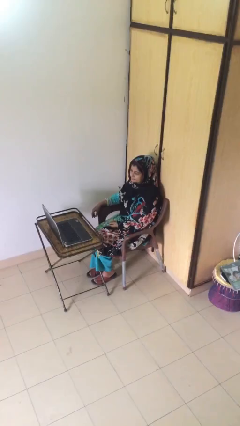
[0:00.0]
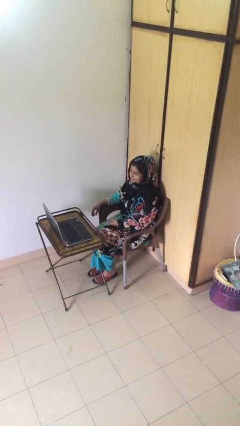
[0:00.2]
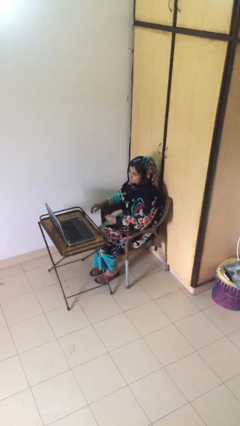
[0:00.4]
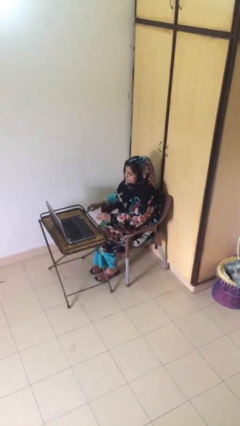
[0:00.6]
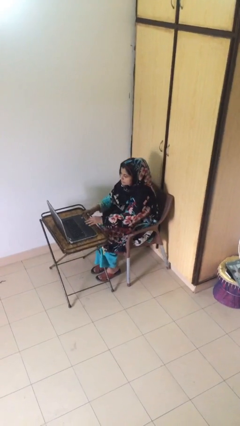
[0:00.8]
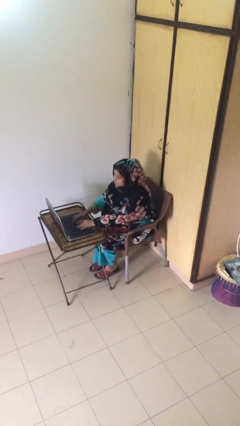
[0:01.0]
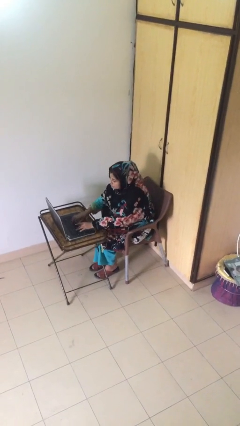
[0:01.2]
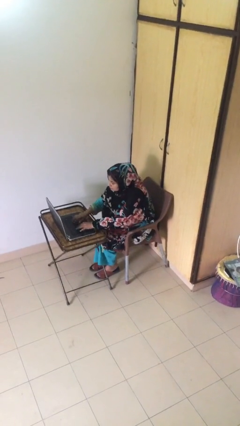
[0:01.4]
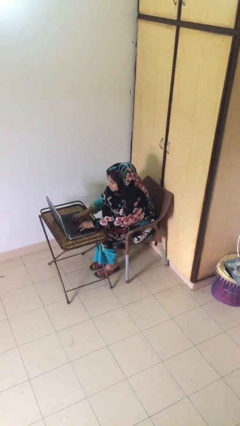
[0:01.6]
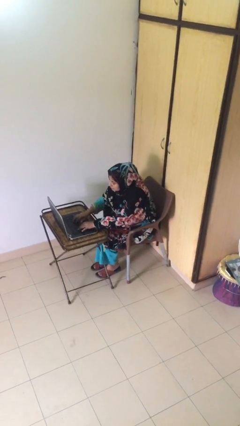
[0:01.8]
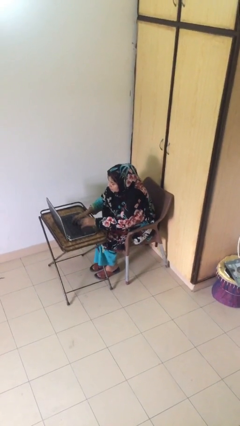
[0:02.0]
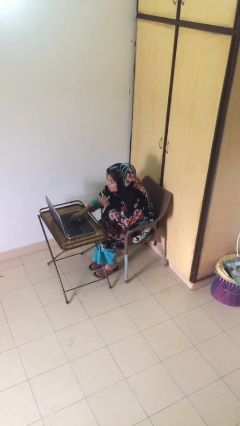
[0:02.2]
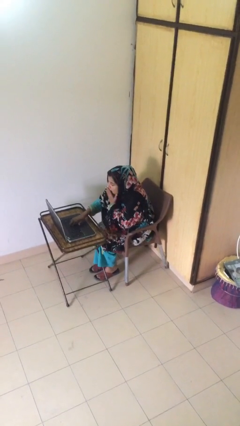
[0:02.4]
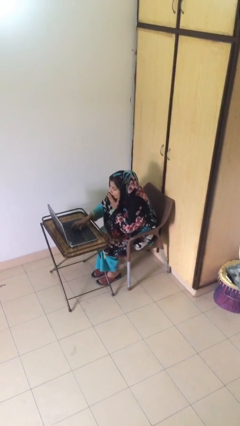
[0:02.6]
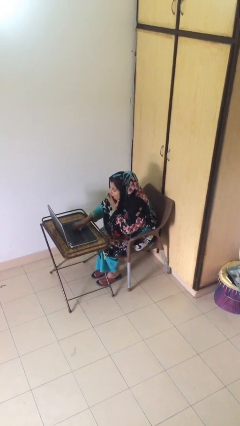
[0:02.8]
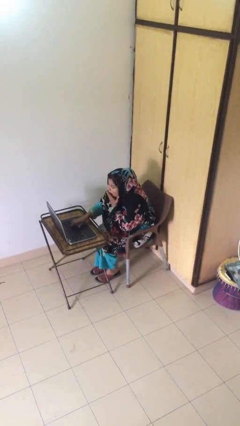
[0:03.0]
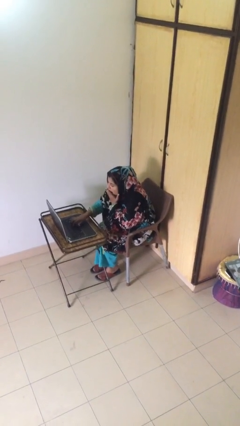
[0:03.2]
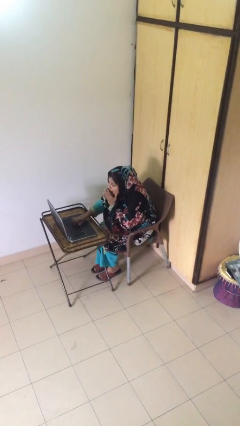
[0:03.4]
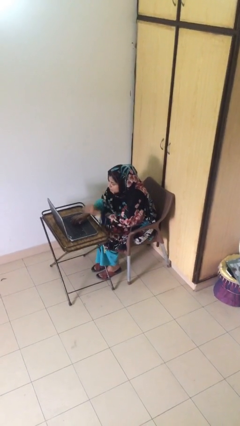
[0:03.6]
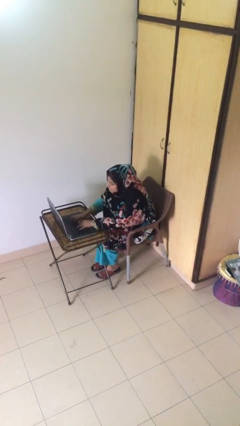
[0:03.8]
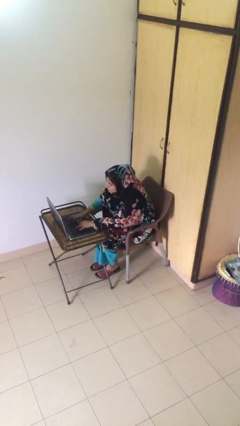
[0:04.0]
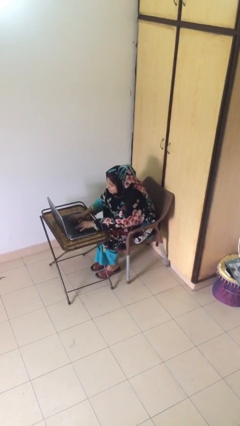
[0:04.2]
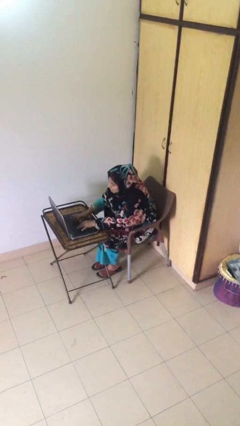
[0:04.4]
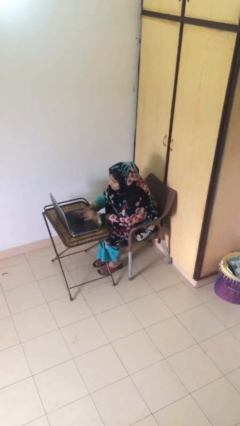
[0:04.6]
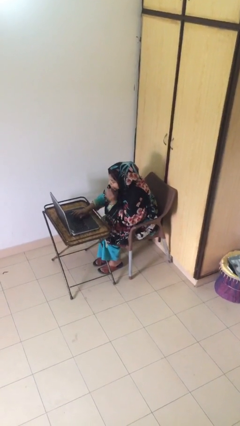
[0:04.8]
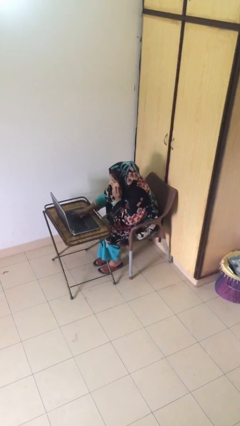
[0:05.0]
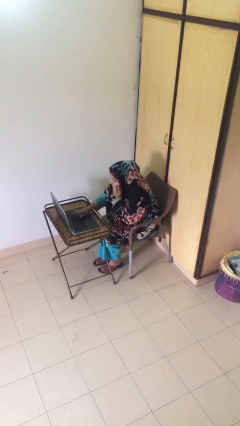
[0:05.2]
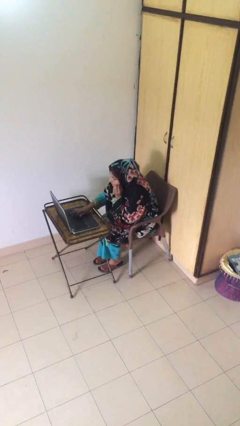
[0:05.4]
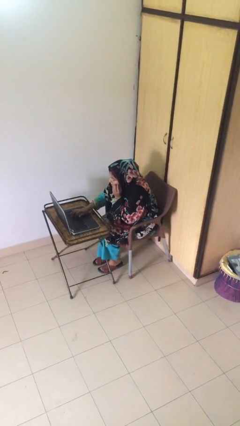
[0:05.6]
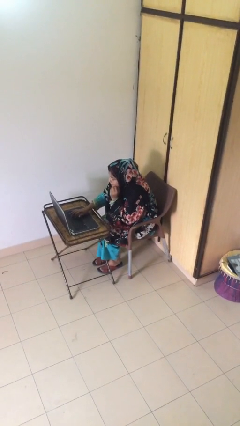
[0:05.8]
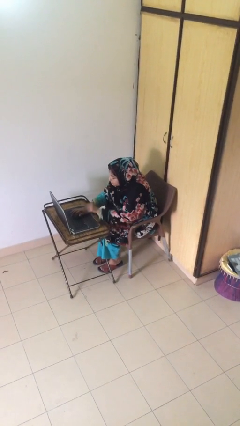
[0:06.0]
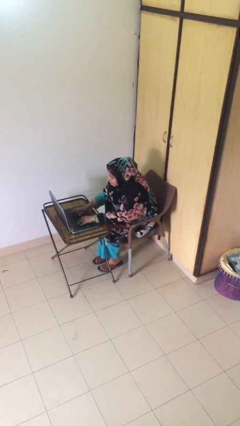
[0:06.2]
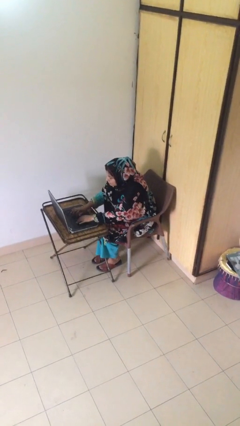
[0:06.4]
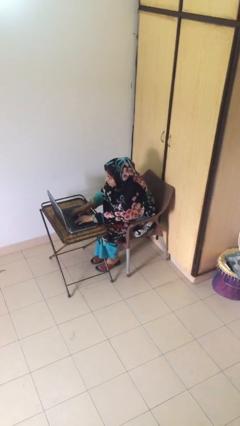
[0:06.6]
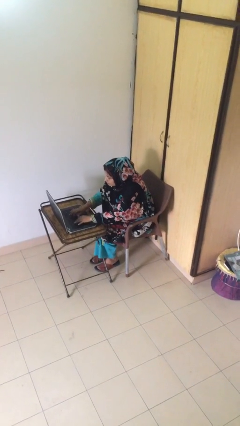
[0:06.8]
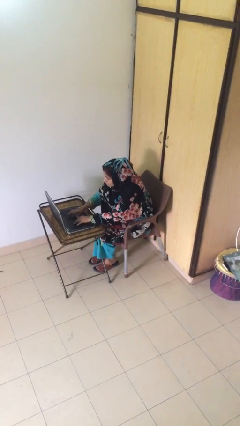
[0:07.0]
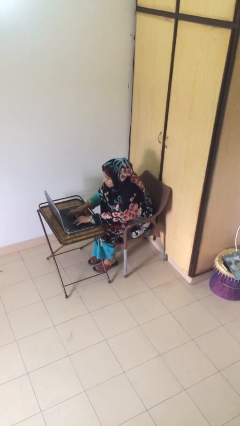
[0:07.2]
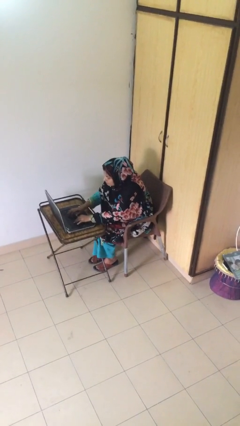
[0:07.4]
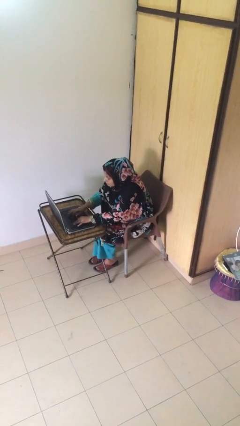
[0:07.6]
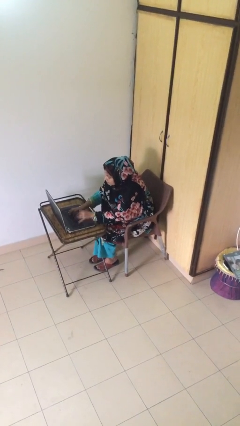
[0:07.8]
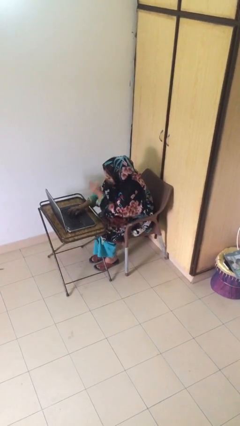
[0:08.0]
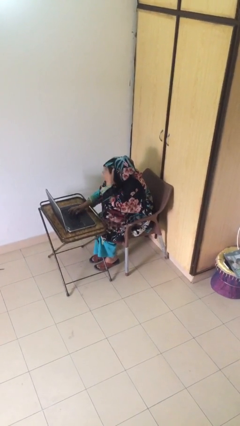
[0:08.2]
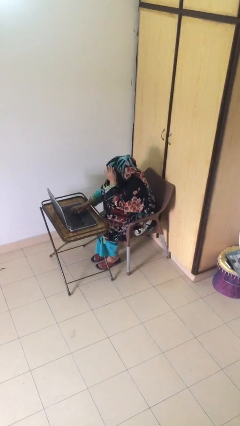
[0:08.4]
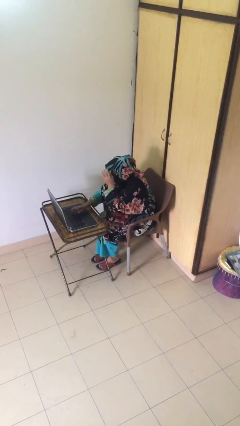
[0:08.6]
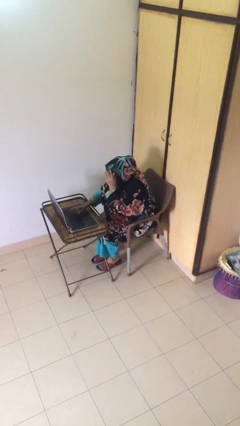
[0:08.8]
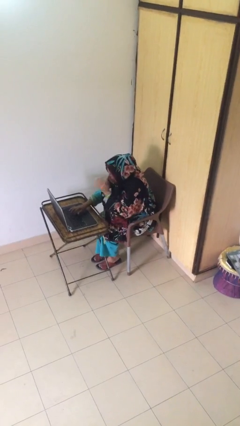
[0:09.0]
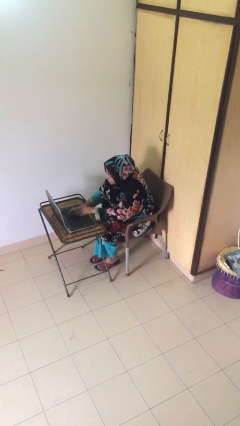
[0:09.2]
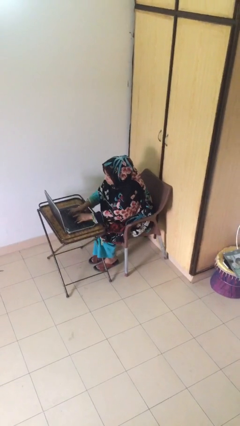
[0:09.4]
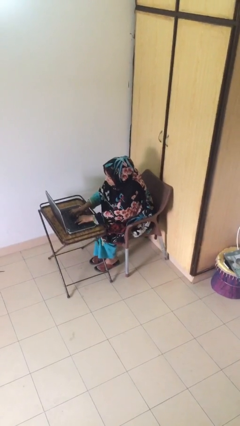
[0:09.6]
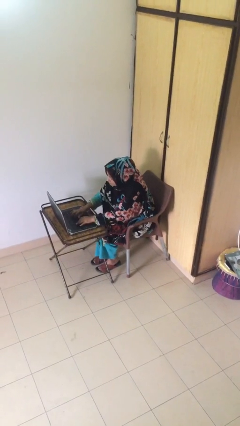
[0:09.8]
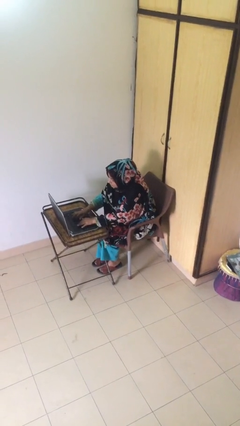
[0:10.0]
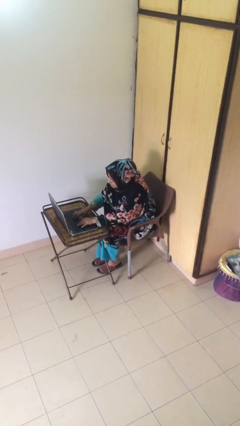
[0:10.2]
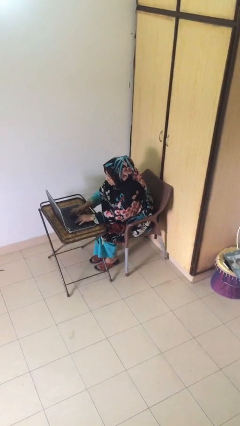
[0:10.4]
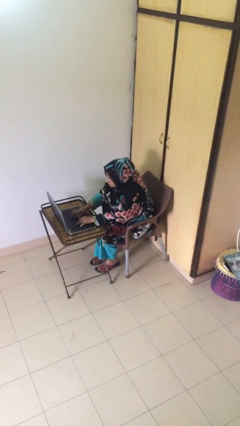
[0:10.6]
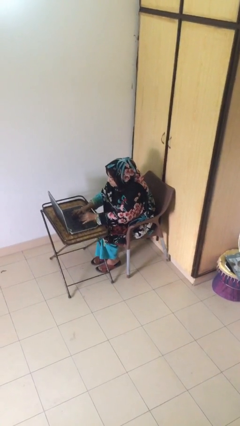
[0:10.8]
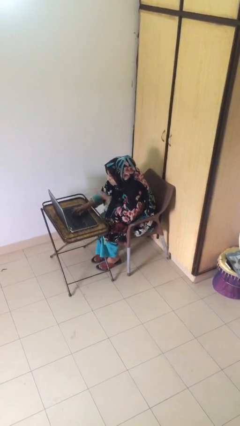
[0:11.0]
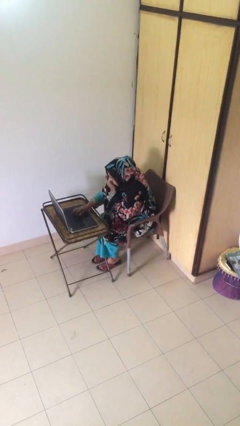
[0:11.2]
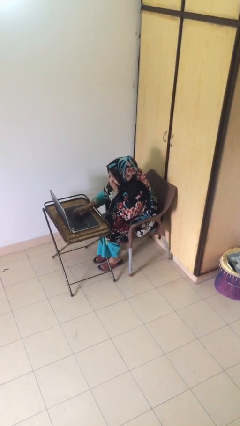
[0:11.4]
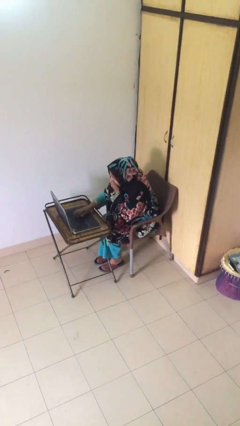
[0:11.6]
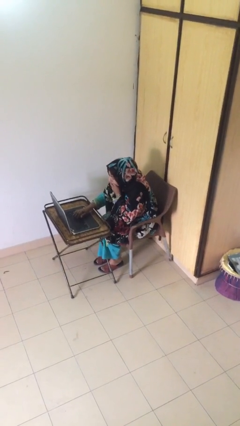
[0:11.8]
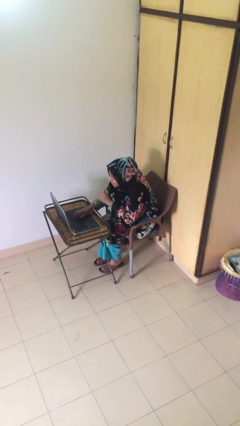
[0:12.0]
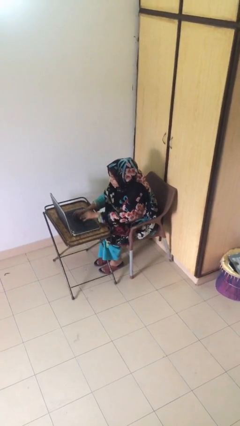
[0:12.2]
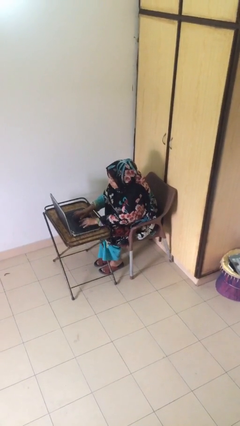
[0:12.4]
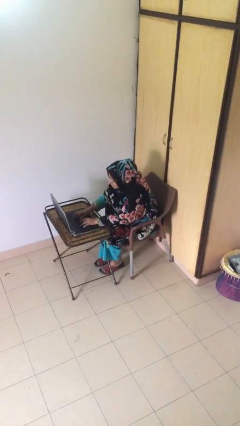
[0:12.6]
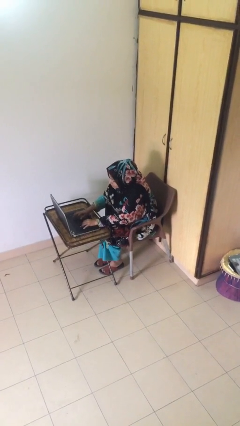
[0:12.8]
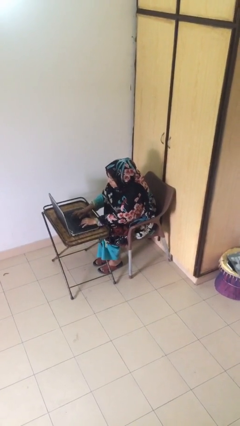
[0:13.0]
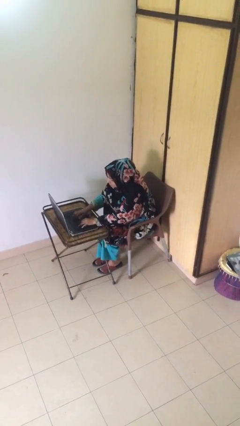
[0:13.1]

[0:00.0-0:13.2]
person interacts with laptop

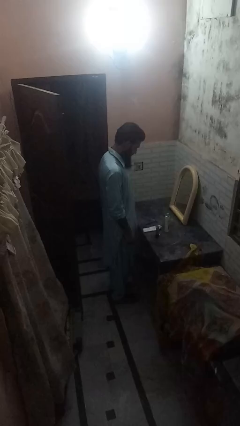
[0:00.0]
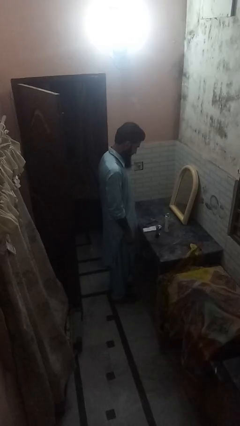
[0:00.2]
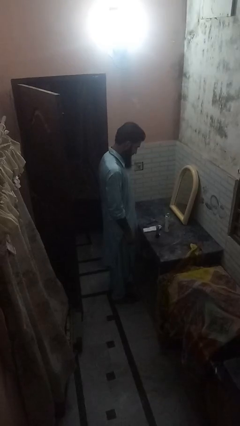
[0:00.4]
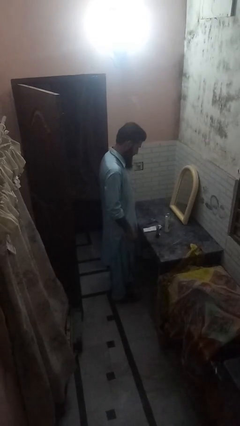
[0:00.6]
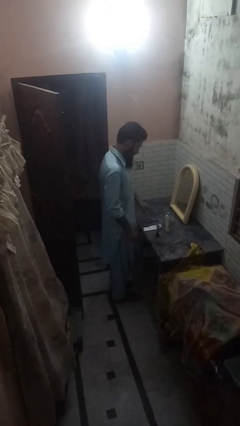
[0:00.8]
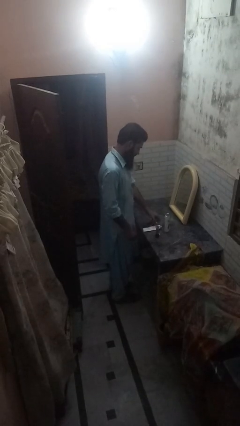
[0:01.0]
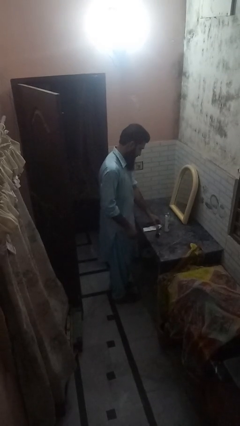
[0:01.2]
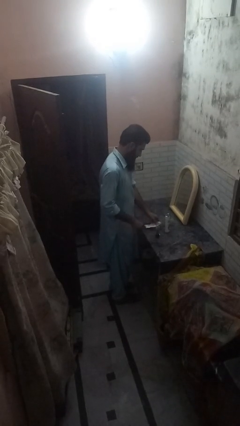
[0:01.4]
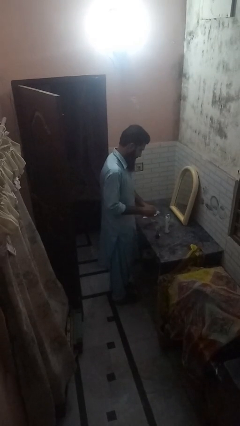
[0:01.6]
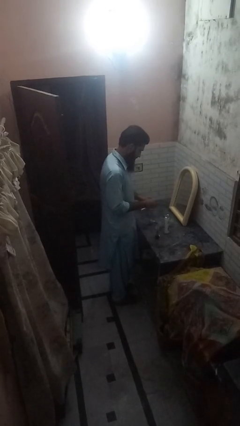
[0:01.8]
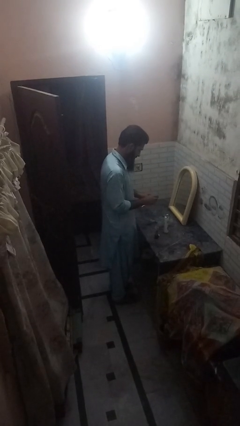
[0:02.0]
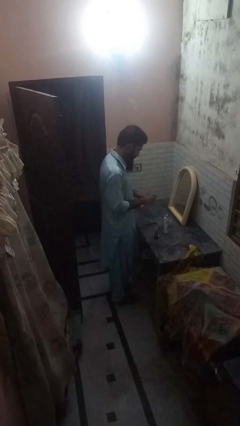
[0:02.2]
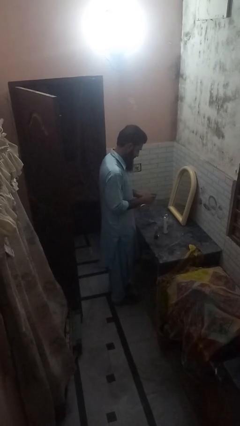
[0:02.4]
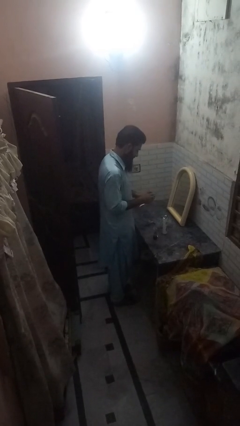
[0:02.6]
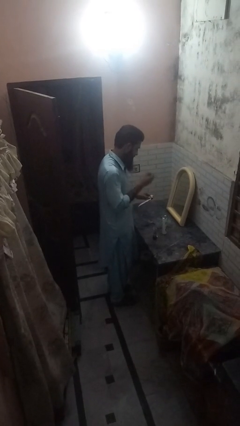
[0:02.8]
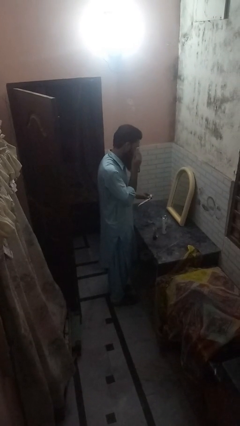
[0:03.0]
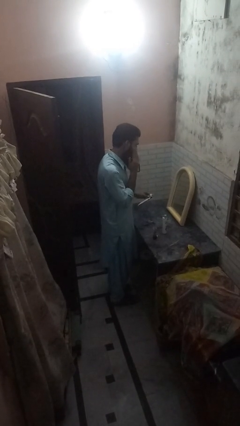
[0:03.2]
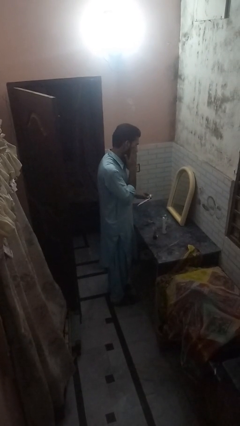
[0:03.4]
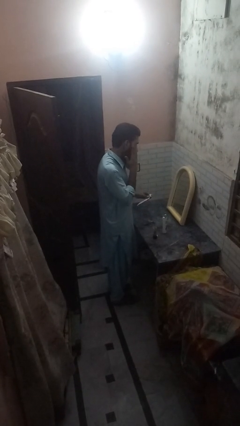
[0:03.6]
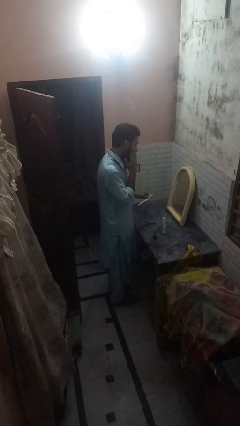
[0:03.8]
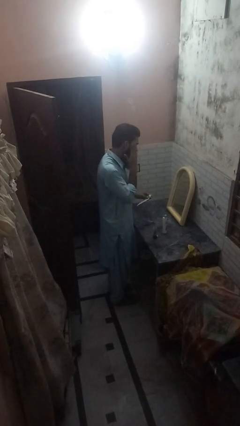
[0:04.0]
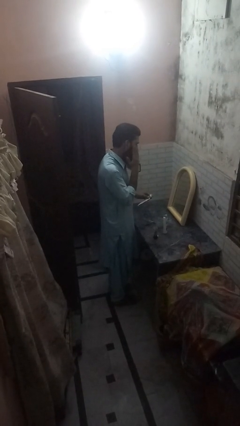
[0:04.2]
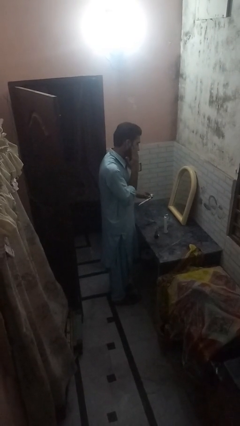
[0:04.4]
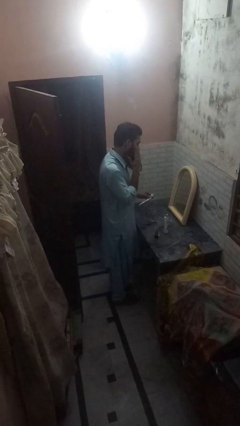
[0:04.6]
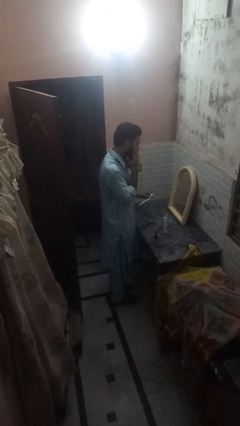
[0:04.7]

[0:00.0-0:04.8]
person applies shaving cream
